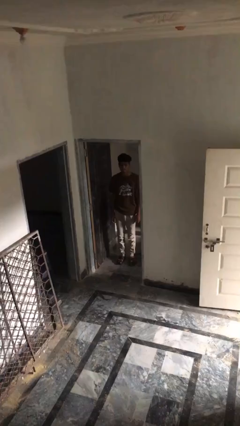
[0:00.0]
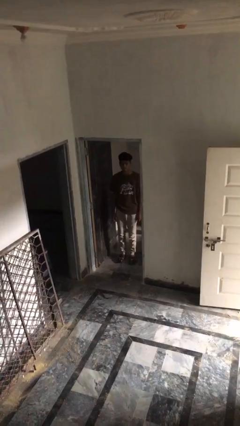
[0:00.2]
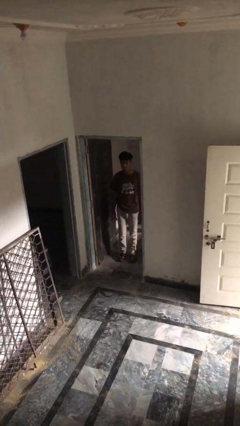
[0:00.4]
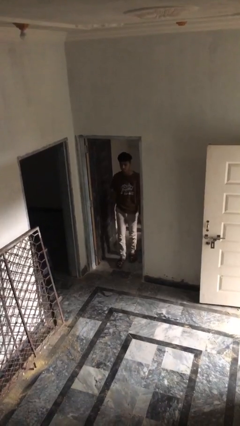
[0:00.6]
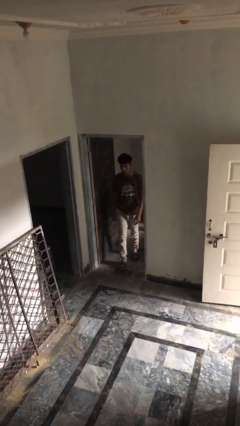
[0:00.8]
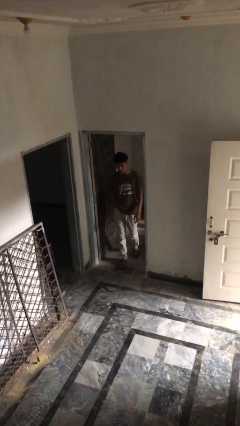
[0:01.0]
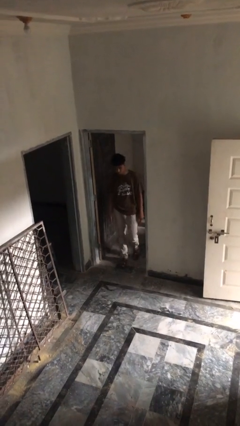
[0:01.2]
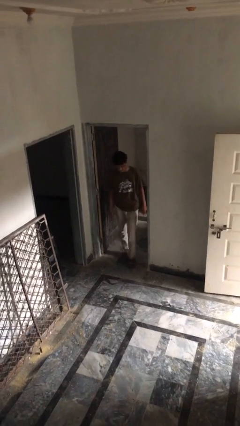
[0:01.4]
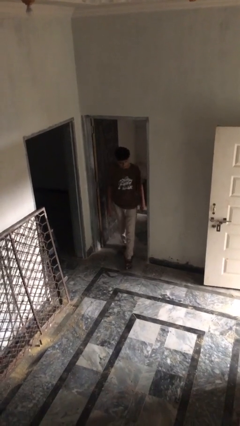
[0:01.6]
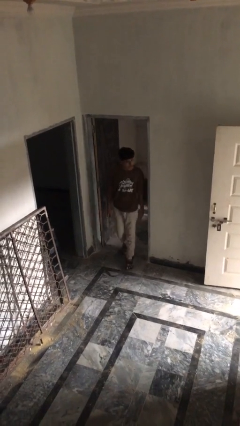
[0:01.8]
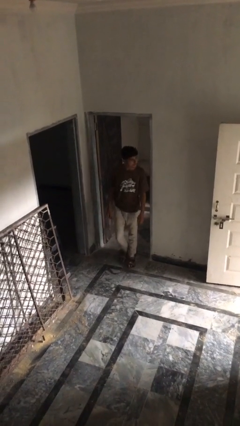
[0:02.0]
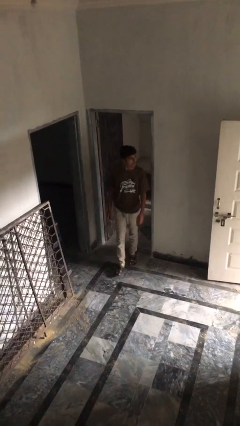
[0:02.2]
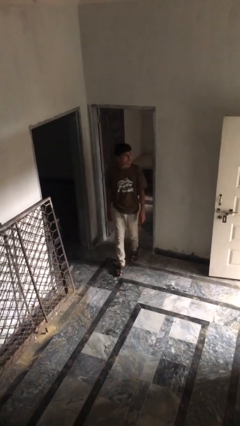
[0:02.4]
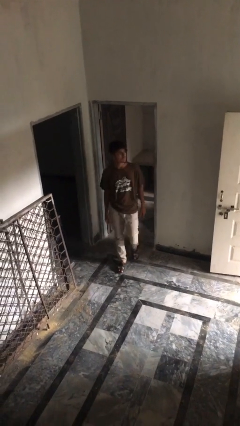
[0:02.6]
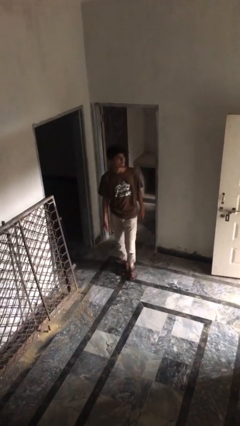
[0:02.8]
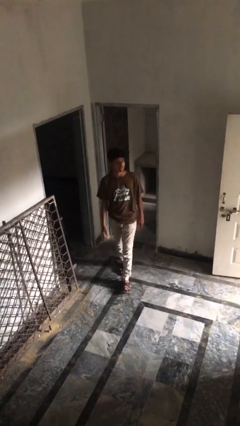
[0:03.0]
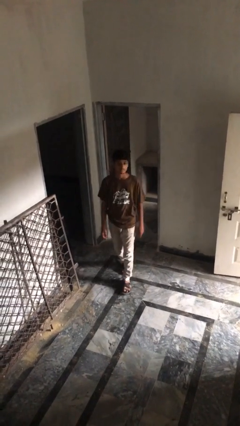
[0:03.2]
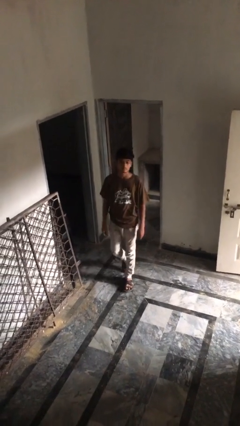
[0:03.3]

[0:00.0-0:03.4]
person enters scene through structure

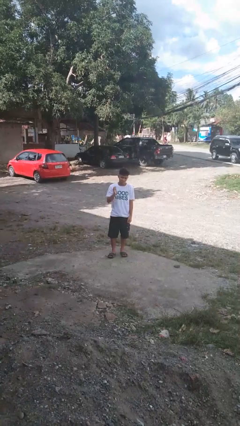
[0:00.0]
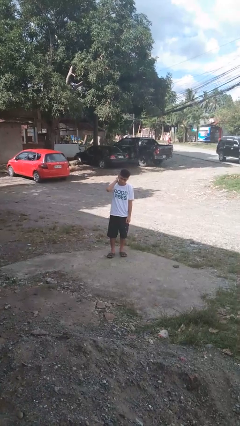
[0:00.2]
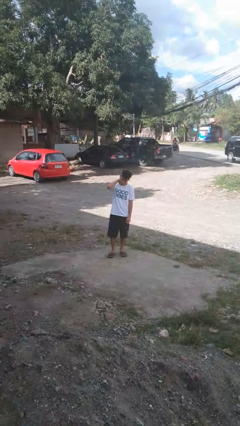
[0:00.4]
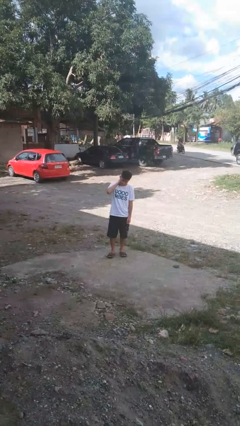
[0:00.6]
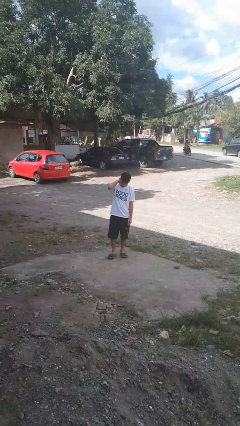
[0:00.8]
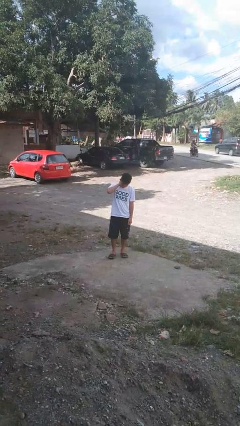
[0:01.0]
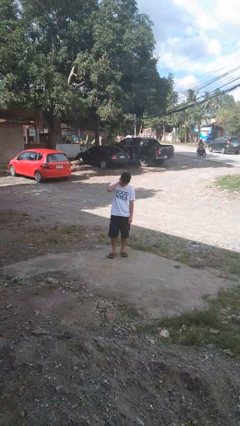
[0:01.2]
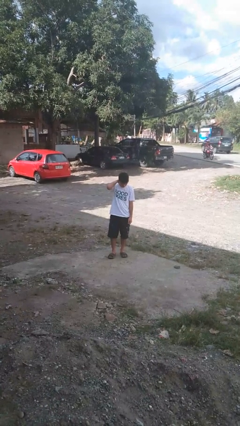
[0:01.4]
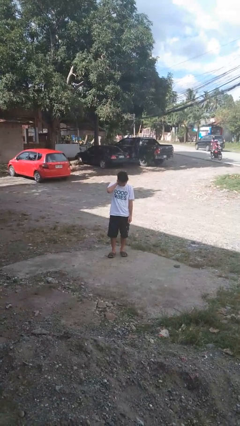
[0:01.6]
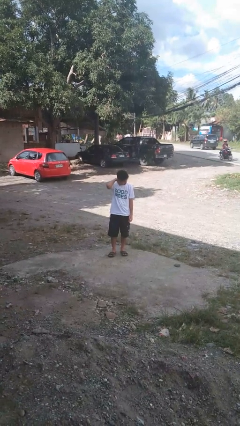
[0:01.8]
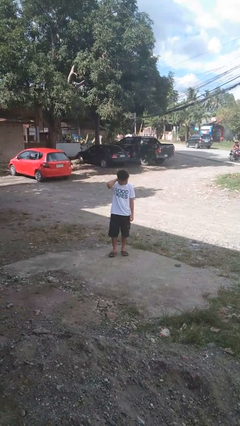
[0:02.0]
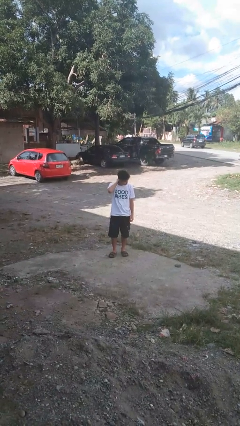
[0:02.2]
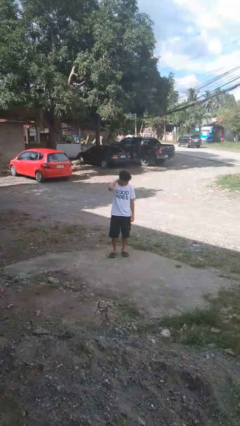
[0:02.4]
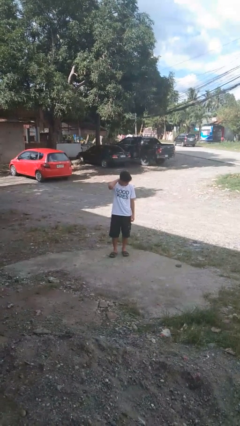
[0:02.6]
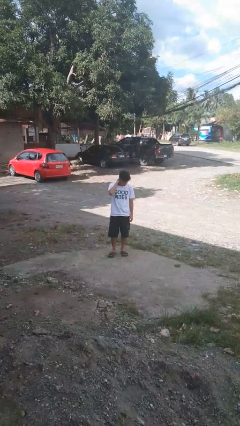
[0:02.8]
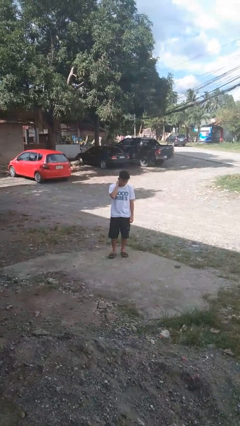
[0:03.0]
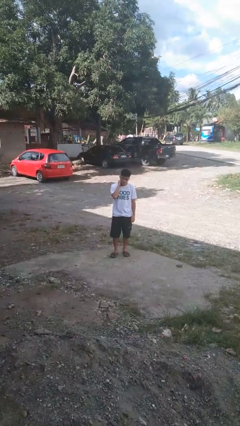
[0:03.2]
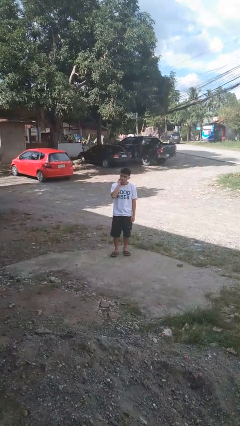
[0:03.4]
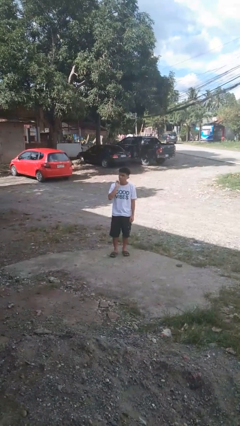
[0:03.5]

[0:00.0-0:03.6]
person rubs neck

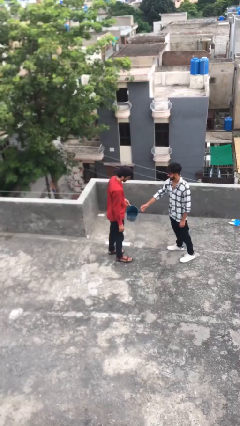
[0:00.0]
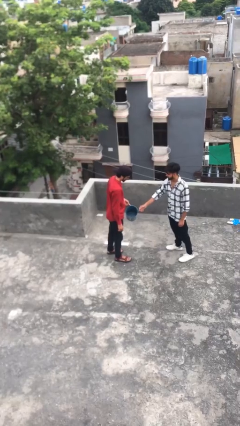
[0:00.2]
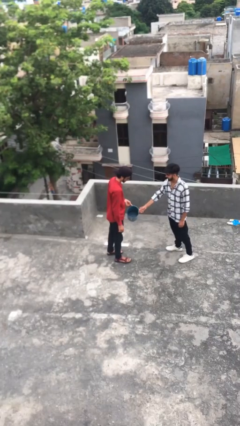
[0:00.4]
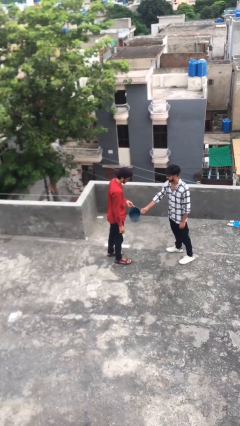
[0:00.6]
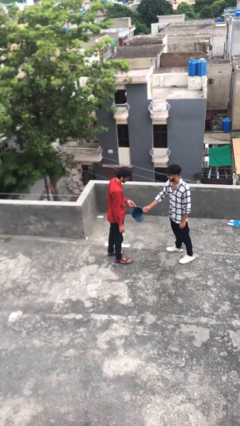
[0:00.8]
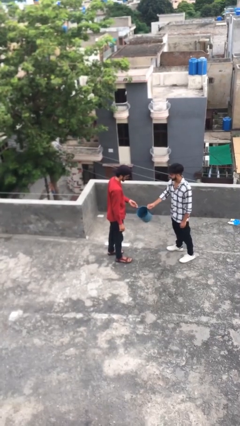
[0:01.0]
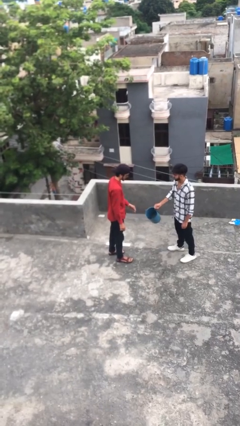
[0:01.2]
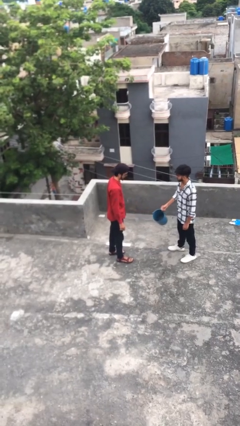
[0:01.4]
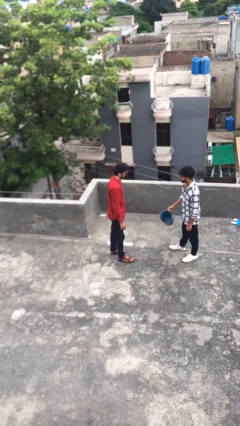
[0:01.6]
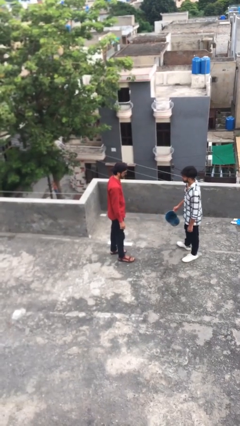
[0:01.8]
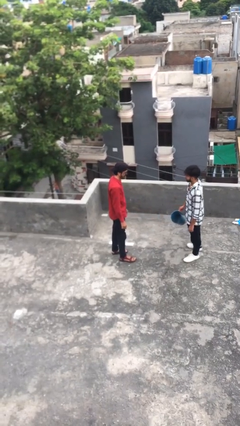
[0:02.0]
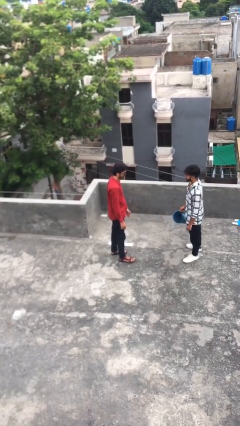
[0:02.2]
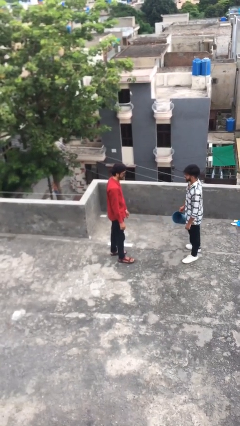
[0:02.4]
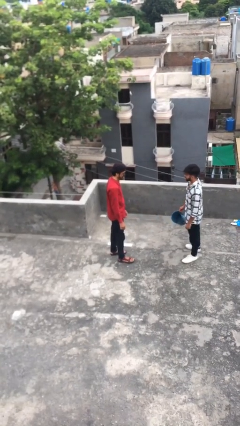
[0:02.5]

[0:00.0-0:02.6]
person transfers object to person

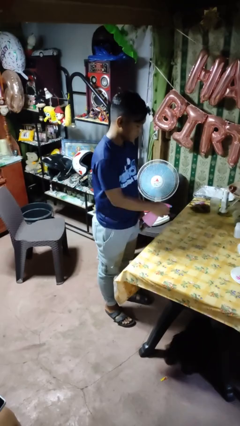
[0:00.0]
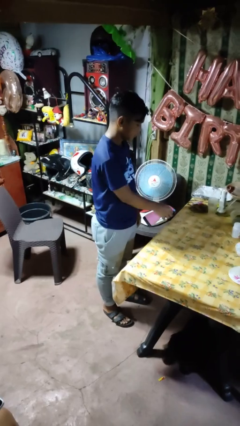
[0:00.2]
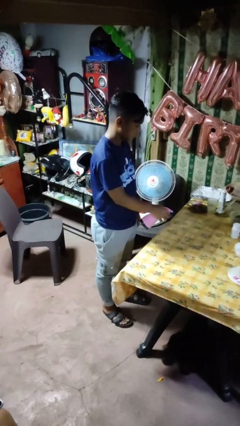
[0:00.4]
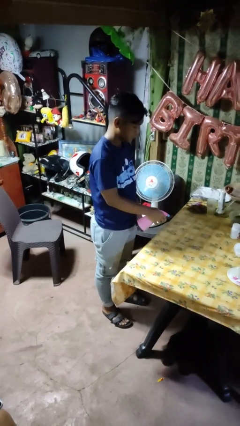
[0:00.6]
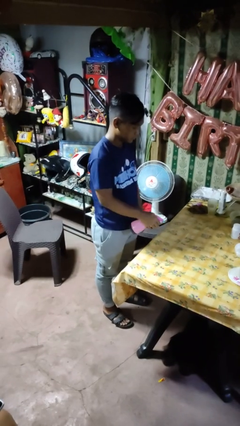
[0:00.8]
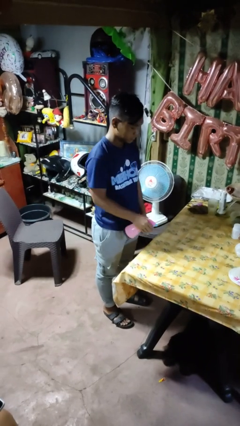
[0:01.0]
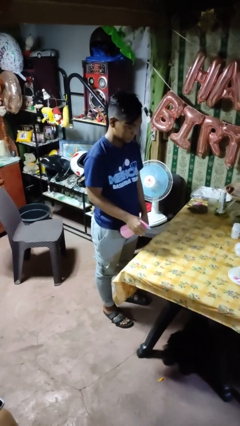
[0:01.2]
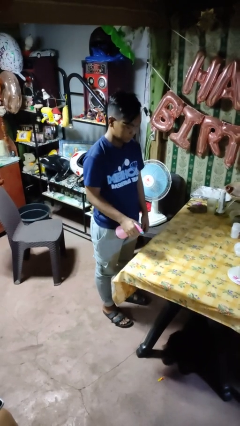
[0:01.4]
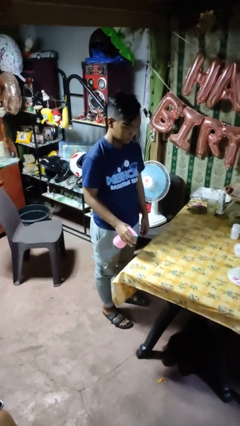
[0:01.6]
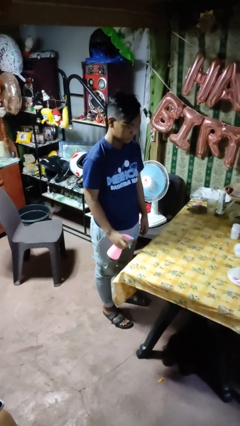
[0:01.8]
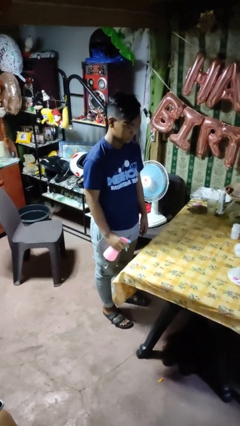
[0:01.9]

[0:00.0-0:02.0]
person sprays from bottle

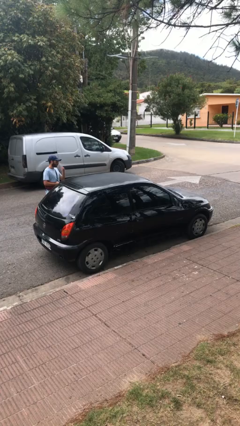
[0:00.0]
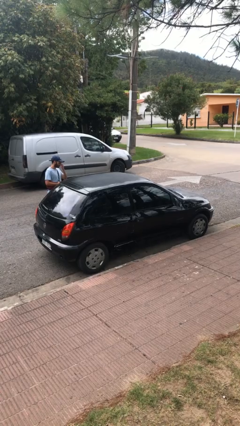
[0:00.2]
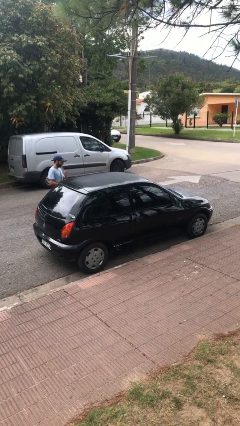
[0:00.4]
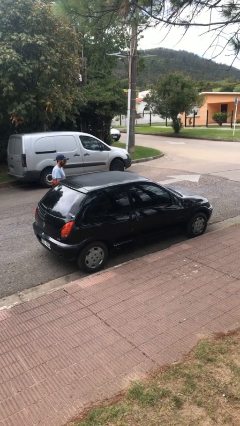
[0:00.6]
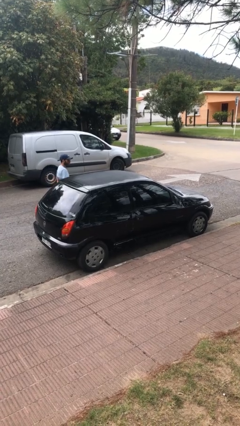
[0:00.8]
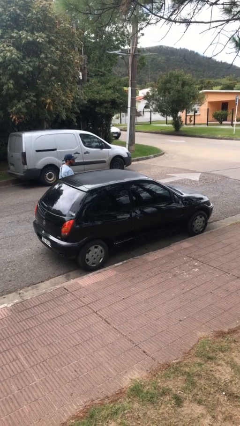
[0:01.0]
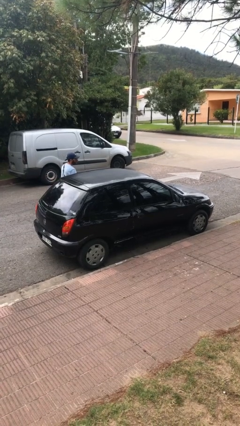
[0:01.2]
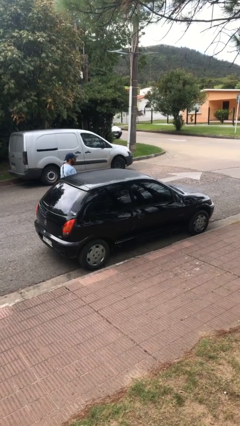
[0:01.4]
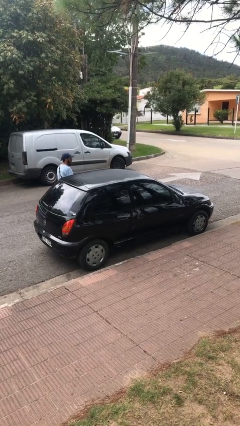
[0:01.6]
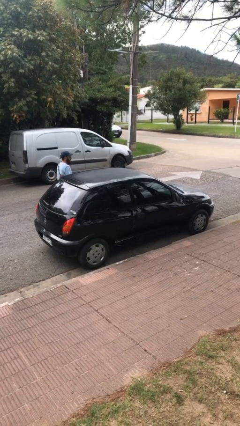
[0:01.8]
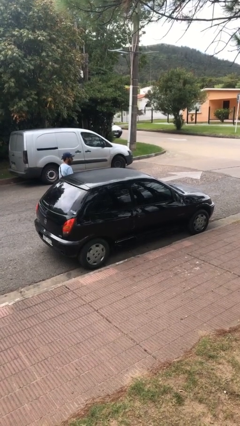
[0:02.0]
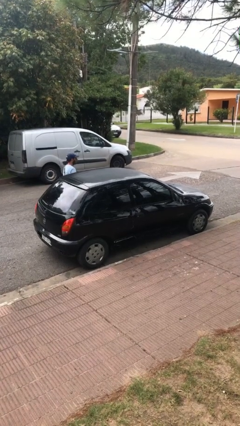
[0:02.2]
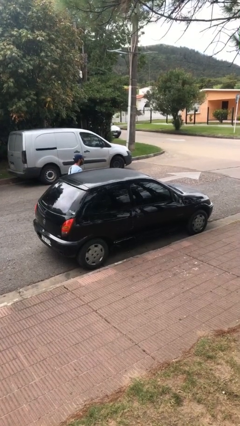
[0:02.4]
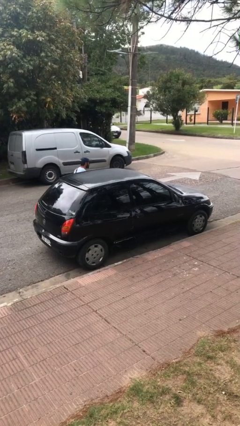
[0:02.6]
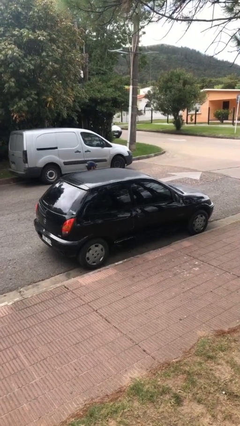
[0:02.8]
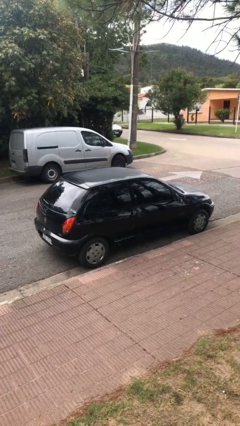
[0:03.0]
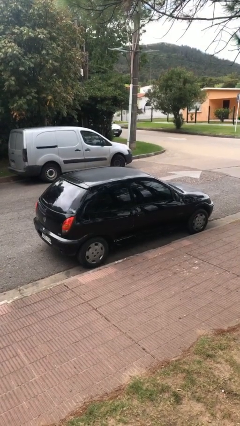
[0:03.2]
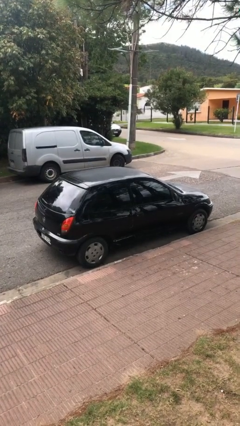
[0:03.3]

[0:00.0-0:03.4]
car picks up person

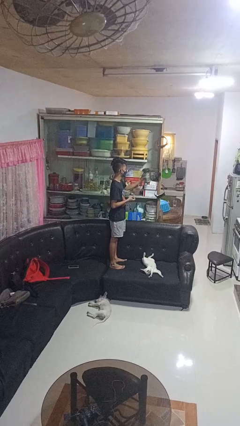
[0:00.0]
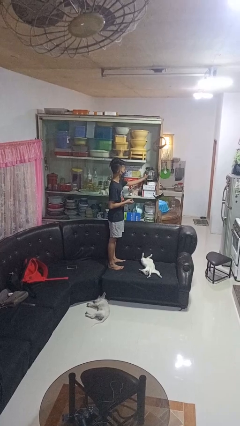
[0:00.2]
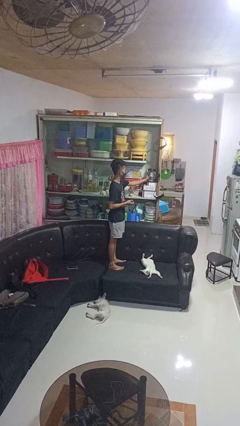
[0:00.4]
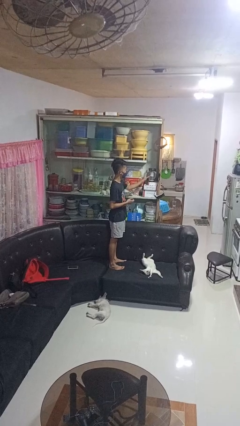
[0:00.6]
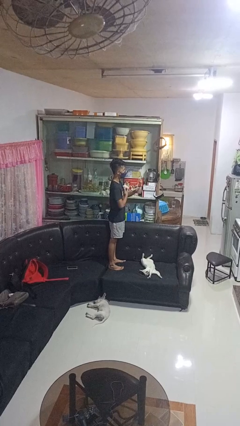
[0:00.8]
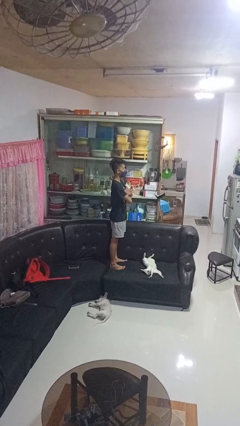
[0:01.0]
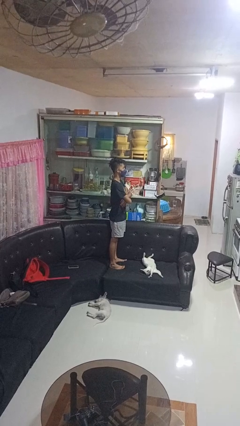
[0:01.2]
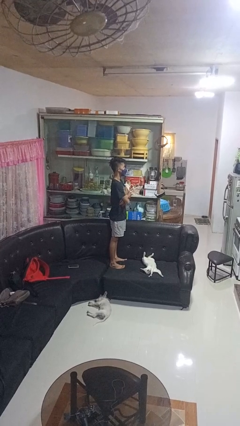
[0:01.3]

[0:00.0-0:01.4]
person puts down object into cabinet

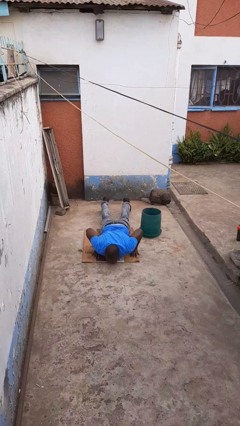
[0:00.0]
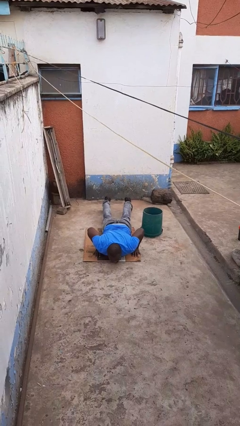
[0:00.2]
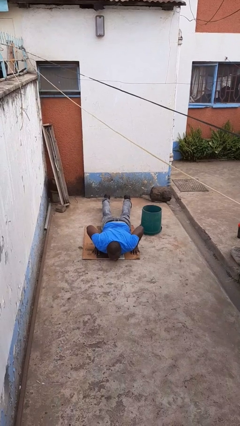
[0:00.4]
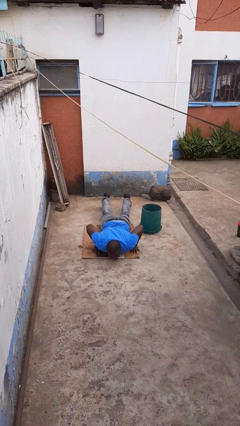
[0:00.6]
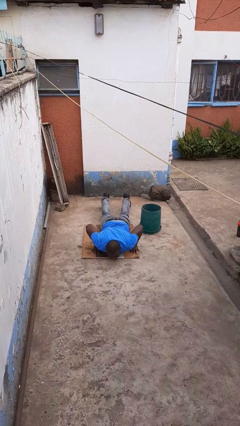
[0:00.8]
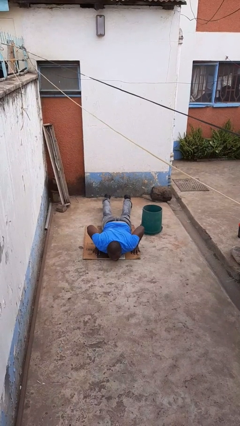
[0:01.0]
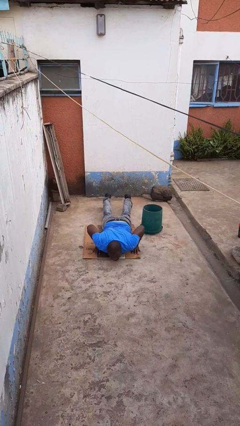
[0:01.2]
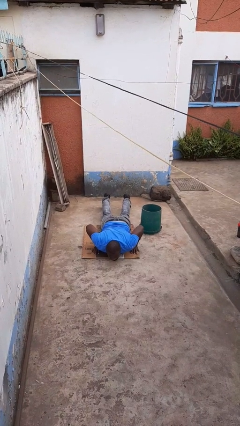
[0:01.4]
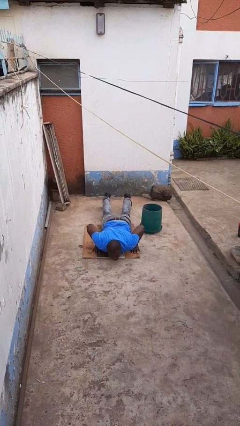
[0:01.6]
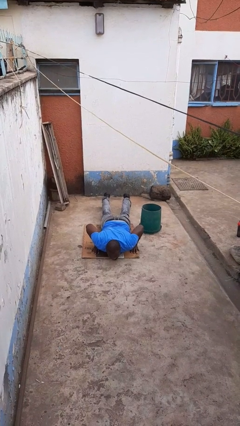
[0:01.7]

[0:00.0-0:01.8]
person lies down on floor
